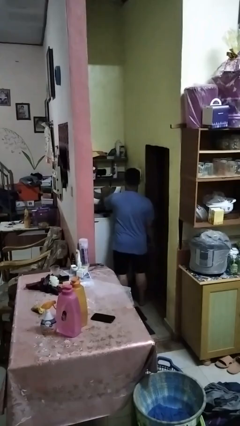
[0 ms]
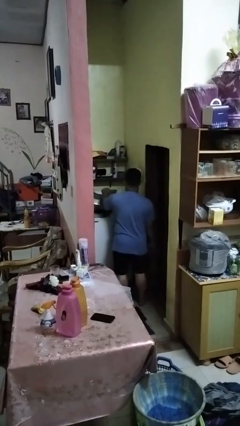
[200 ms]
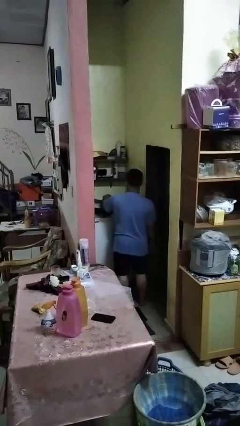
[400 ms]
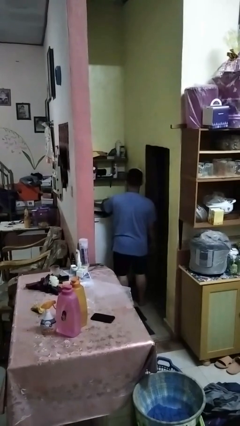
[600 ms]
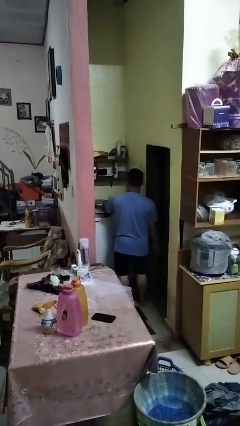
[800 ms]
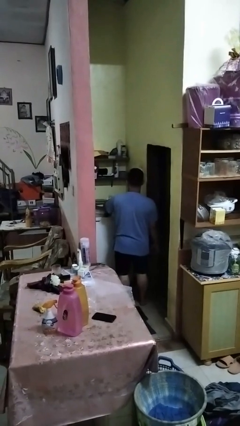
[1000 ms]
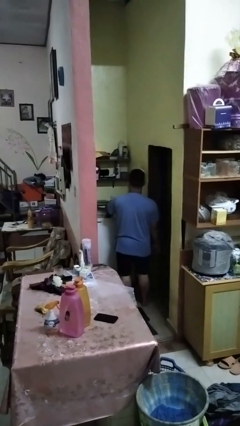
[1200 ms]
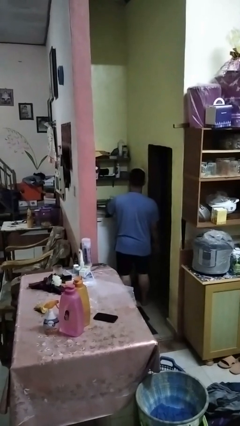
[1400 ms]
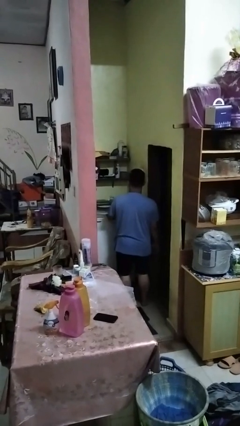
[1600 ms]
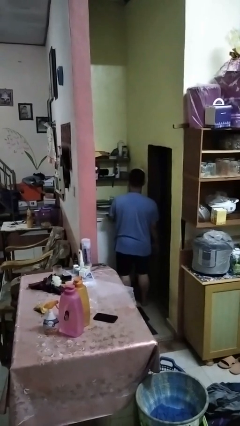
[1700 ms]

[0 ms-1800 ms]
person closes clothes washer

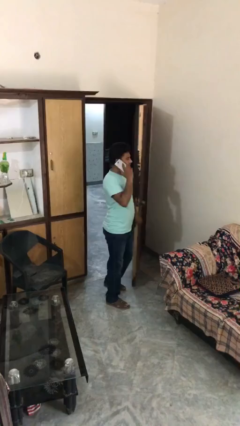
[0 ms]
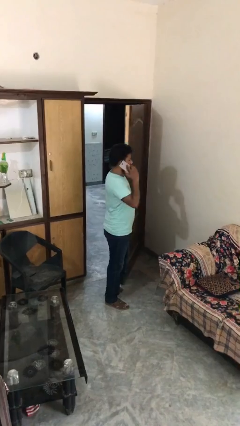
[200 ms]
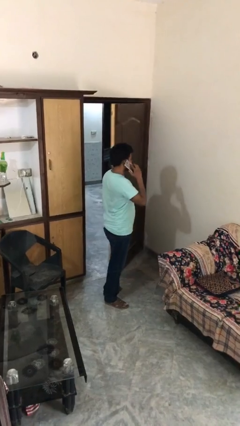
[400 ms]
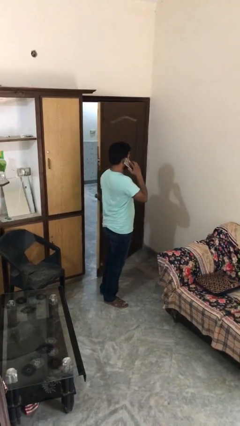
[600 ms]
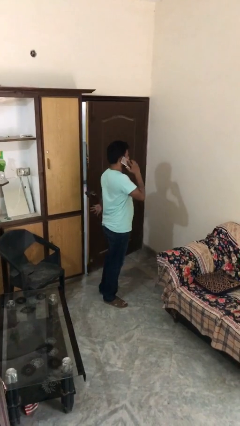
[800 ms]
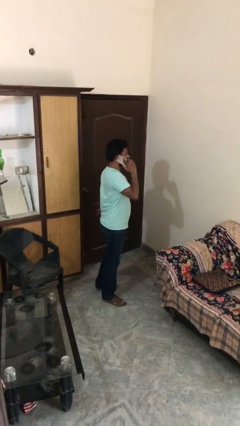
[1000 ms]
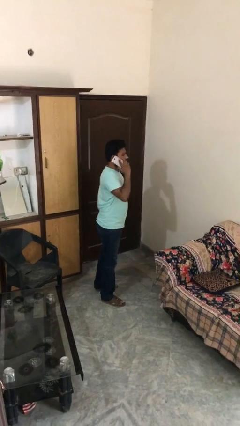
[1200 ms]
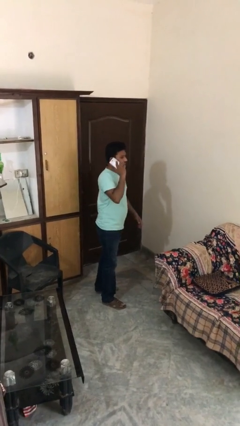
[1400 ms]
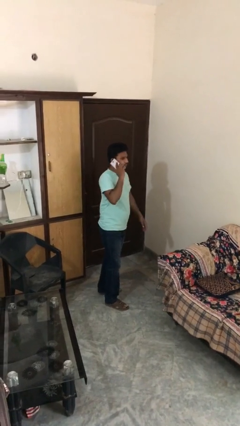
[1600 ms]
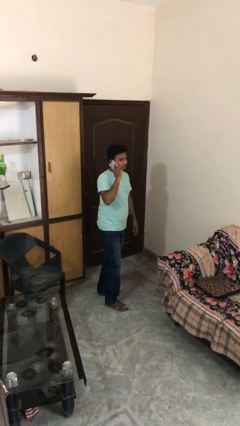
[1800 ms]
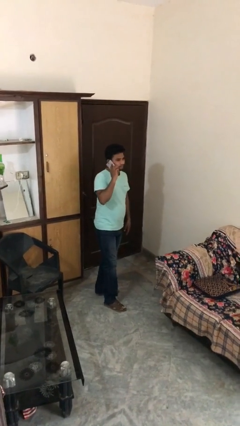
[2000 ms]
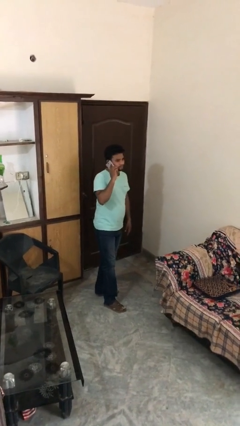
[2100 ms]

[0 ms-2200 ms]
person closes facility door

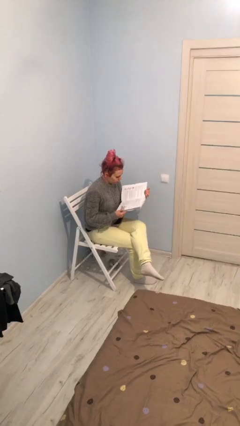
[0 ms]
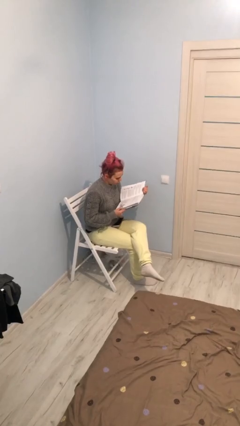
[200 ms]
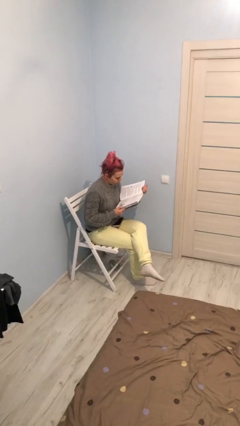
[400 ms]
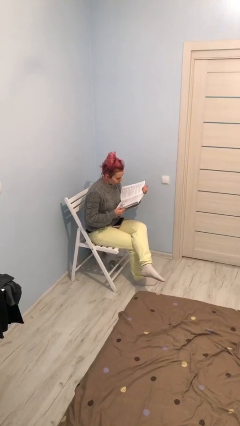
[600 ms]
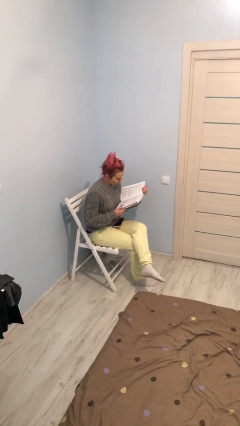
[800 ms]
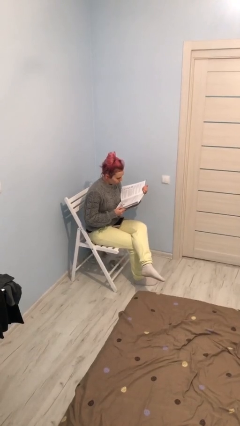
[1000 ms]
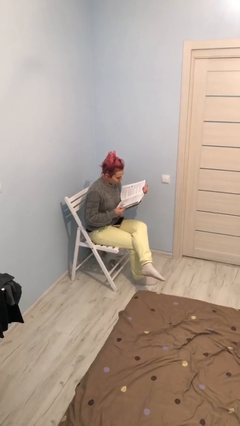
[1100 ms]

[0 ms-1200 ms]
person reads document

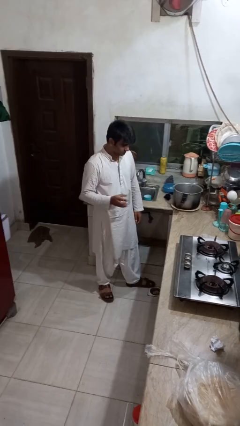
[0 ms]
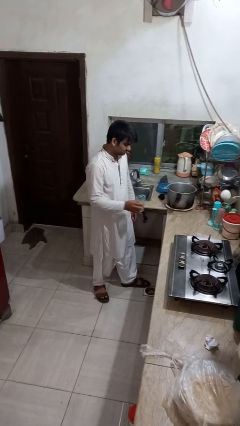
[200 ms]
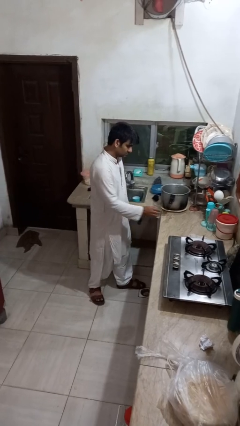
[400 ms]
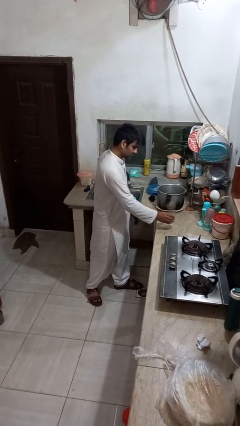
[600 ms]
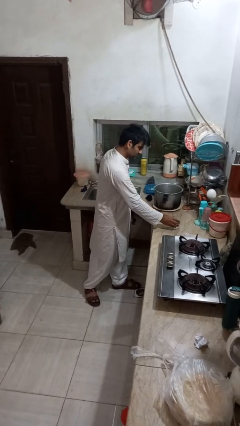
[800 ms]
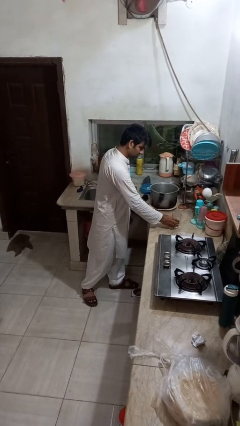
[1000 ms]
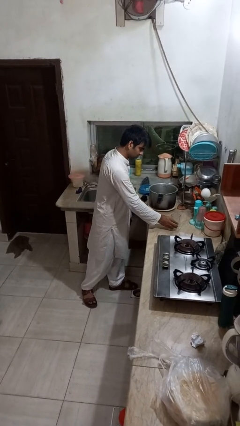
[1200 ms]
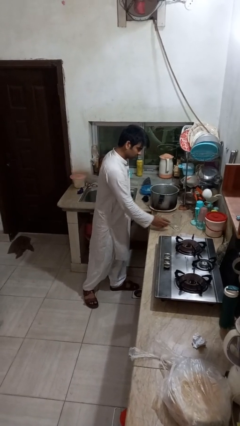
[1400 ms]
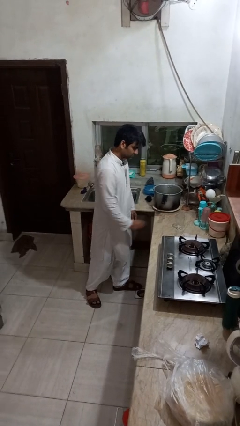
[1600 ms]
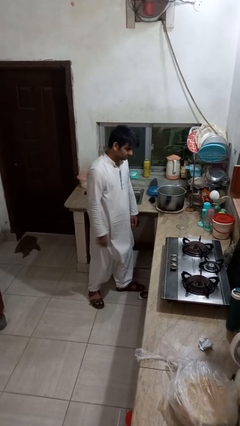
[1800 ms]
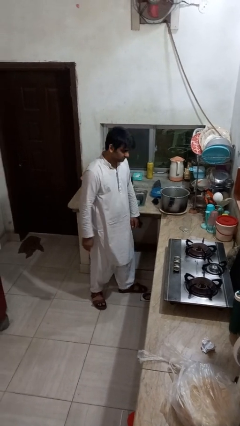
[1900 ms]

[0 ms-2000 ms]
person puts down object on countertop

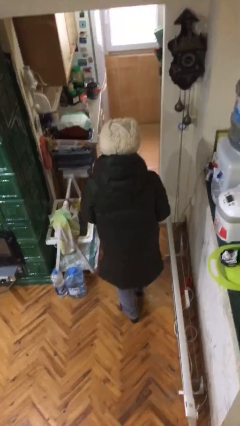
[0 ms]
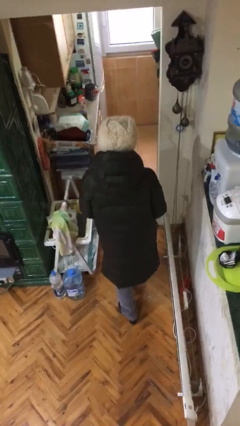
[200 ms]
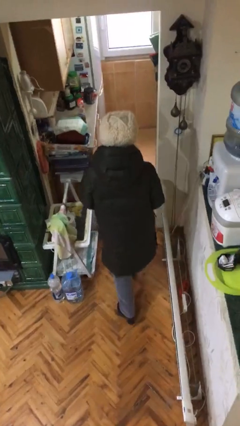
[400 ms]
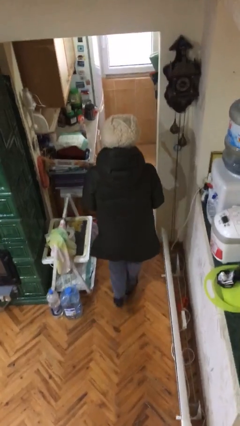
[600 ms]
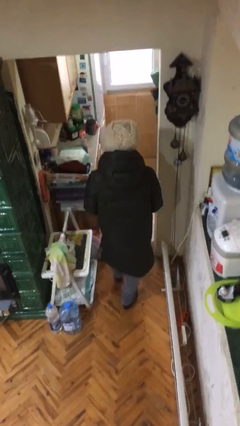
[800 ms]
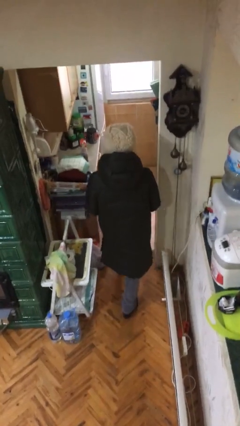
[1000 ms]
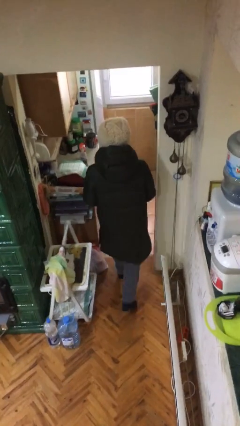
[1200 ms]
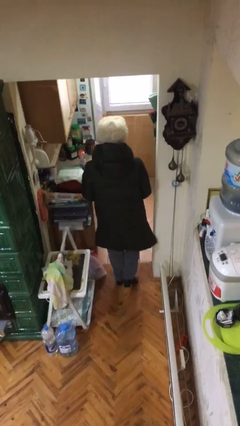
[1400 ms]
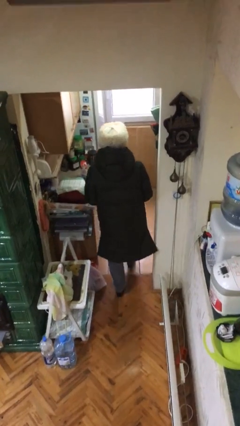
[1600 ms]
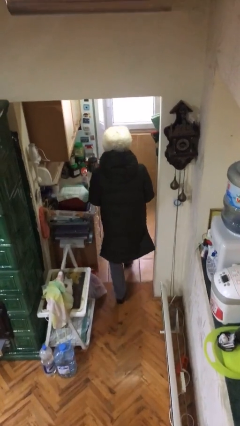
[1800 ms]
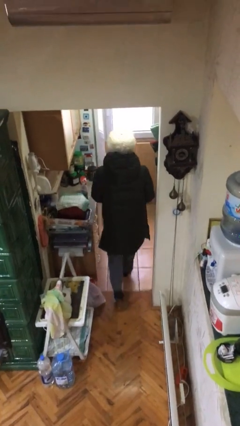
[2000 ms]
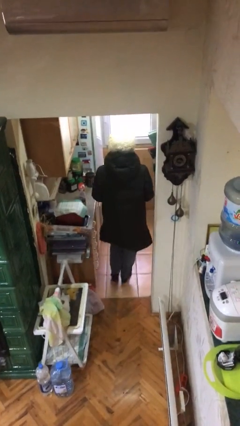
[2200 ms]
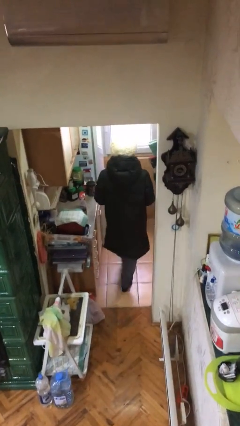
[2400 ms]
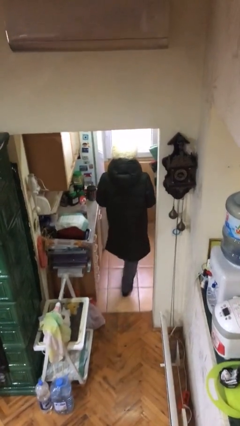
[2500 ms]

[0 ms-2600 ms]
person exits scene through structure

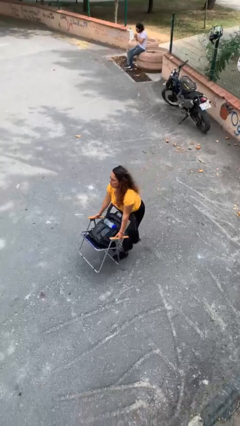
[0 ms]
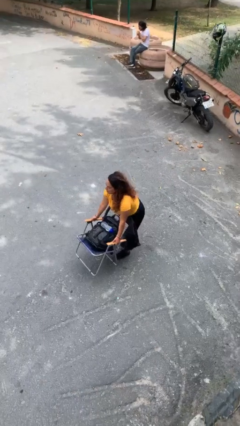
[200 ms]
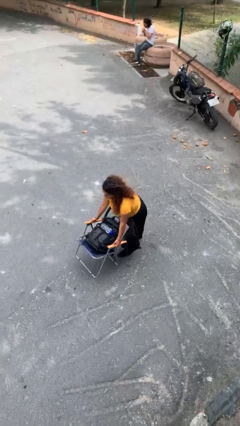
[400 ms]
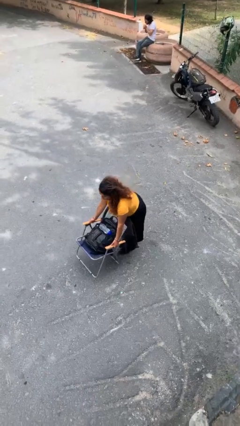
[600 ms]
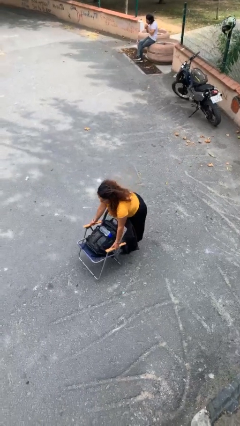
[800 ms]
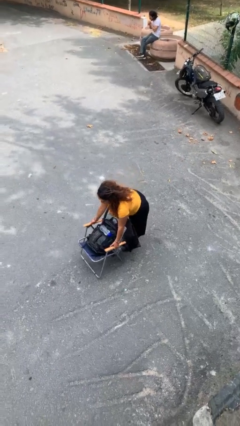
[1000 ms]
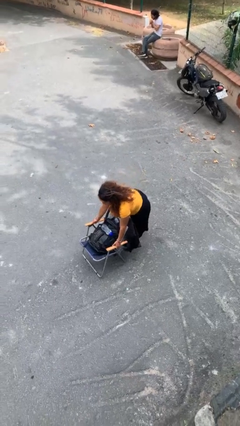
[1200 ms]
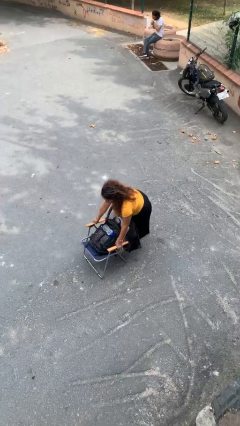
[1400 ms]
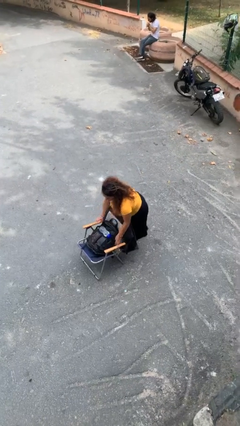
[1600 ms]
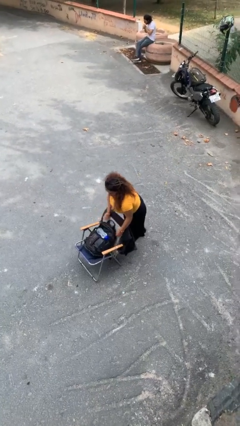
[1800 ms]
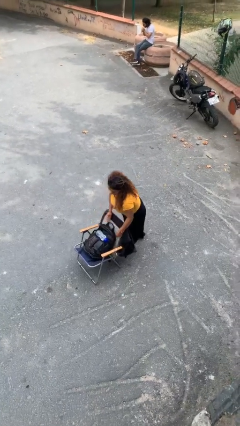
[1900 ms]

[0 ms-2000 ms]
person puts down object on floor

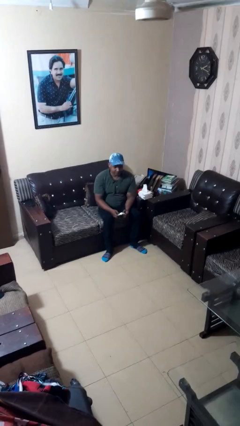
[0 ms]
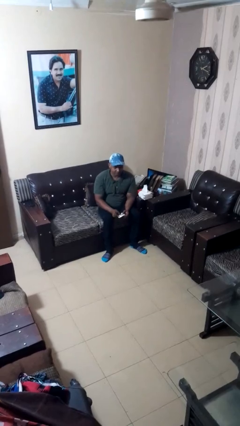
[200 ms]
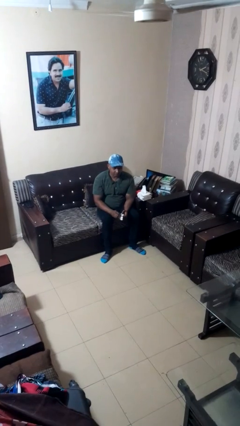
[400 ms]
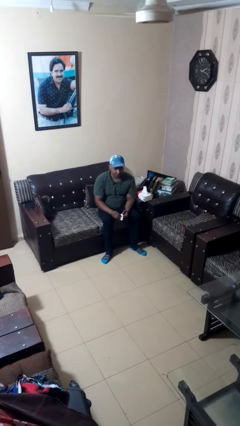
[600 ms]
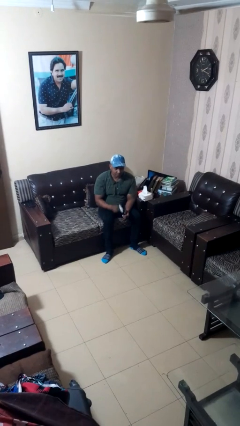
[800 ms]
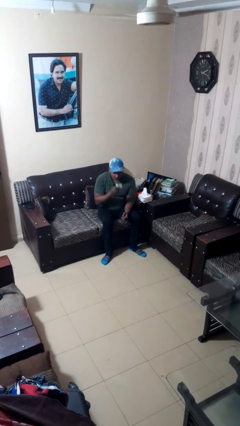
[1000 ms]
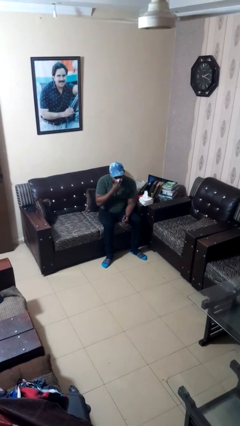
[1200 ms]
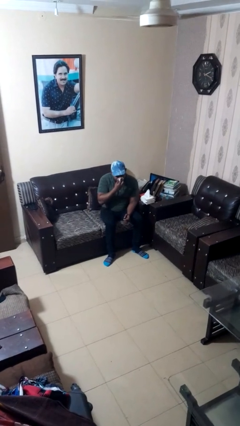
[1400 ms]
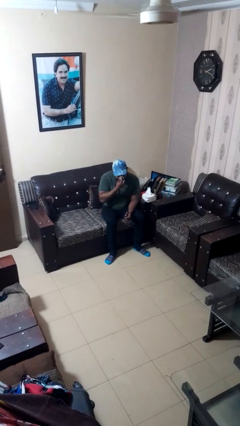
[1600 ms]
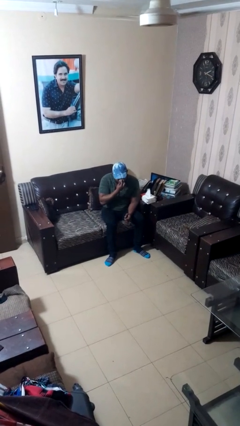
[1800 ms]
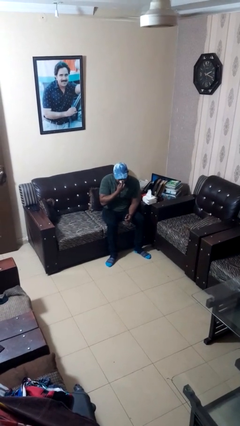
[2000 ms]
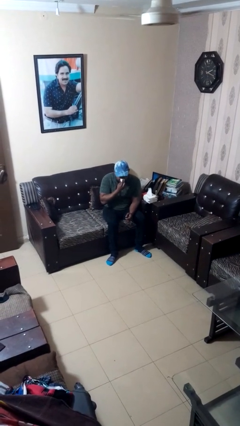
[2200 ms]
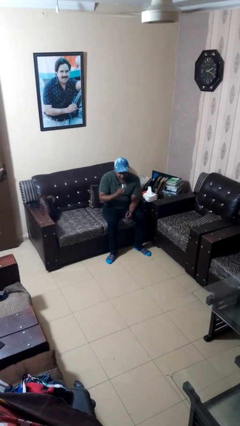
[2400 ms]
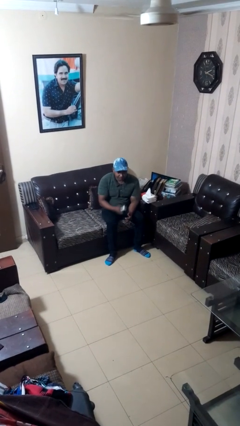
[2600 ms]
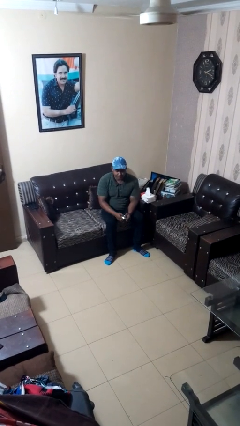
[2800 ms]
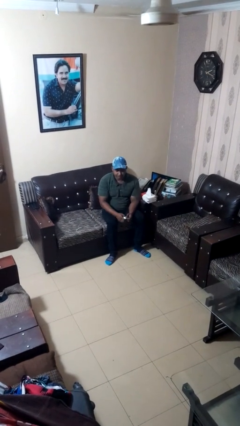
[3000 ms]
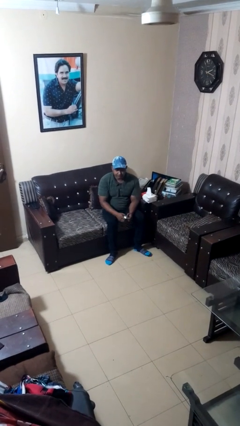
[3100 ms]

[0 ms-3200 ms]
person blows nose

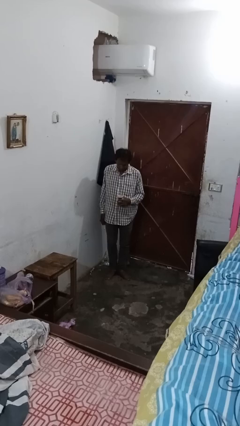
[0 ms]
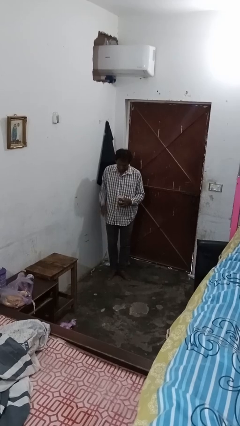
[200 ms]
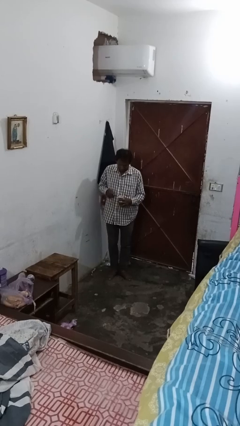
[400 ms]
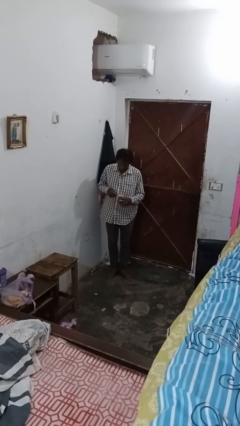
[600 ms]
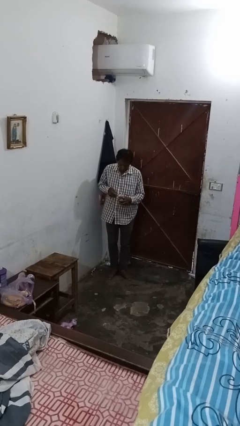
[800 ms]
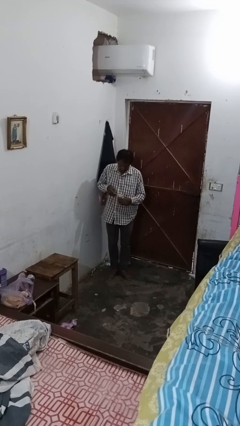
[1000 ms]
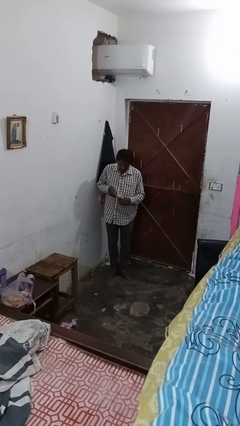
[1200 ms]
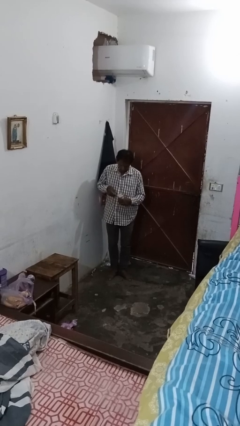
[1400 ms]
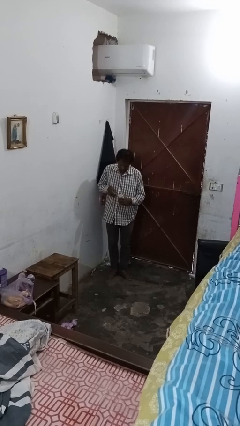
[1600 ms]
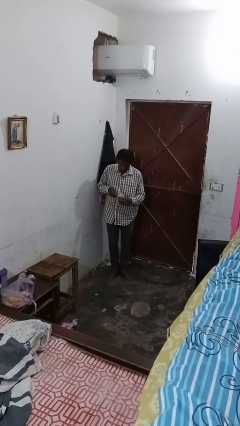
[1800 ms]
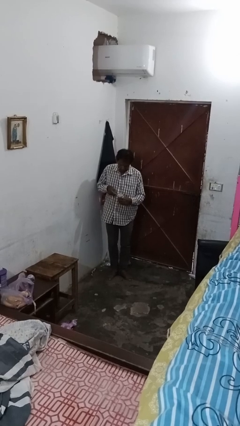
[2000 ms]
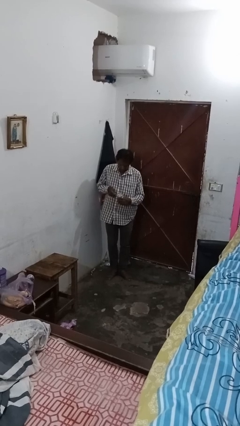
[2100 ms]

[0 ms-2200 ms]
person opens can with can opener
